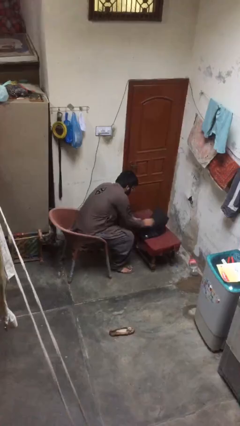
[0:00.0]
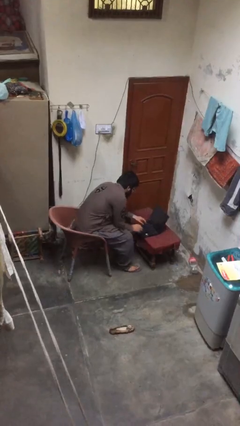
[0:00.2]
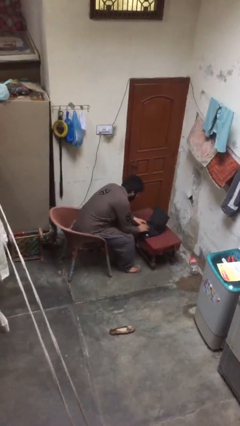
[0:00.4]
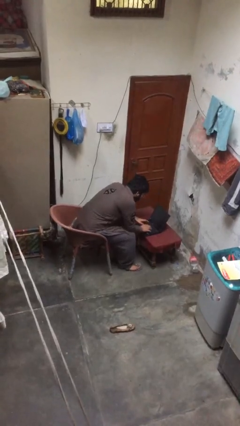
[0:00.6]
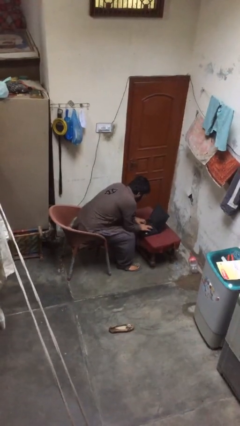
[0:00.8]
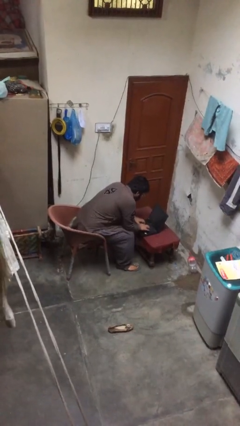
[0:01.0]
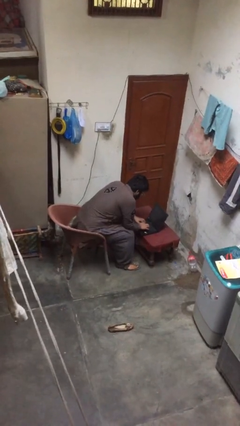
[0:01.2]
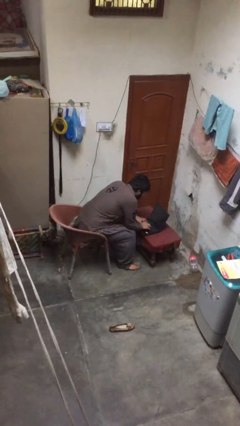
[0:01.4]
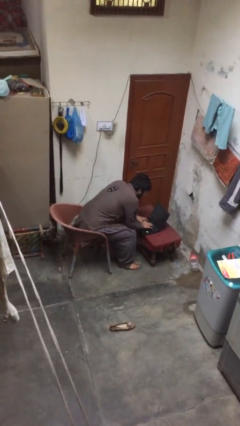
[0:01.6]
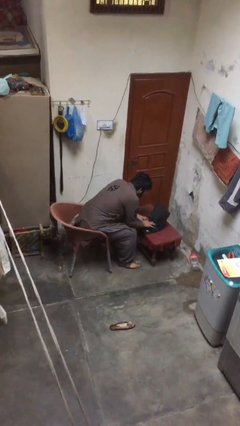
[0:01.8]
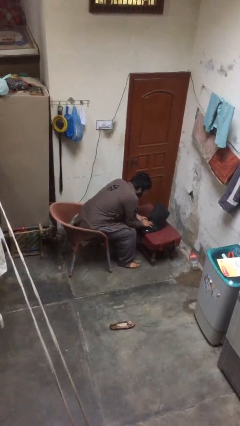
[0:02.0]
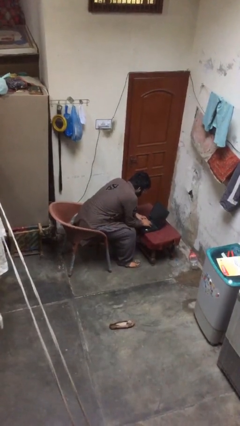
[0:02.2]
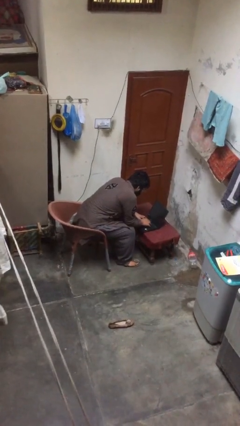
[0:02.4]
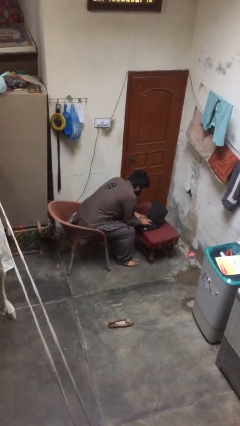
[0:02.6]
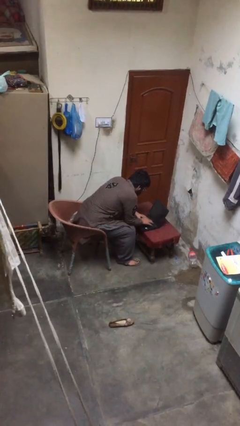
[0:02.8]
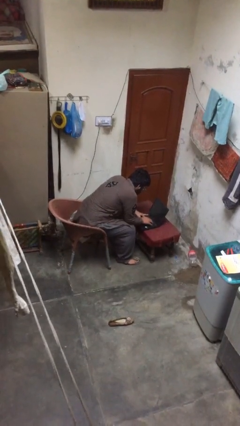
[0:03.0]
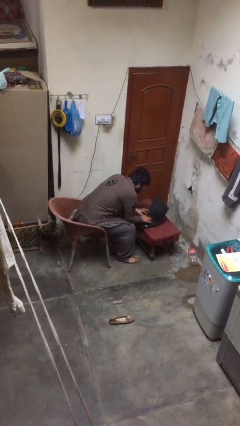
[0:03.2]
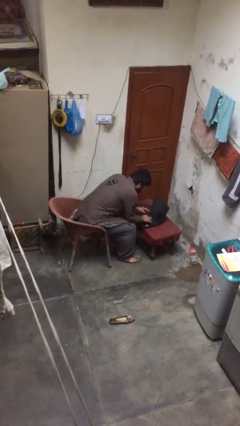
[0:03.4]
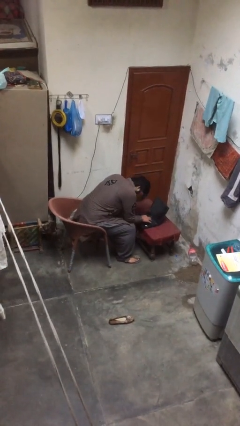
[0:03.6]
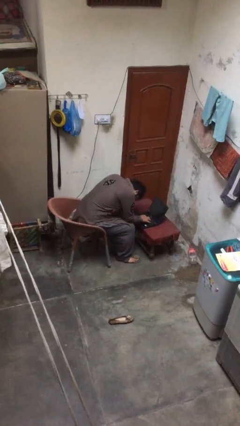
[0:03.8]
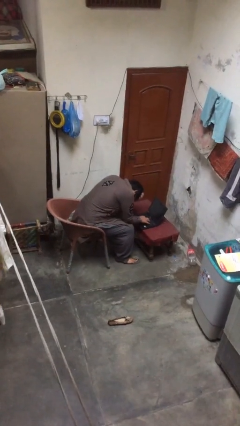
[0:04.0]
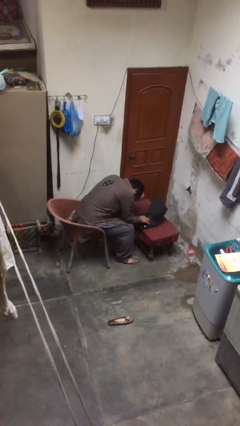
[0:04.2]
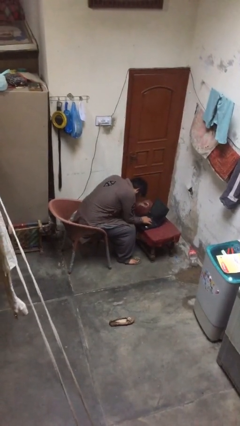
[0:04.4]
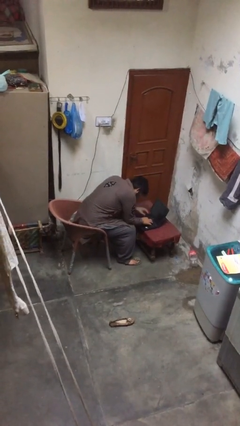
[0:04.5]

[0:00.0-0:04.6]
person interacts with laptop

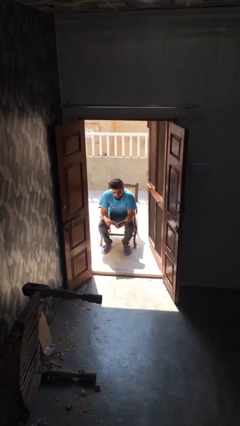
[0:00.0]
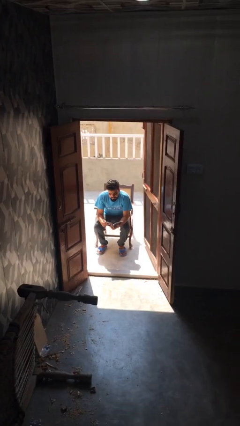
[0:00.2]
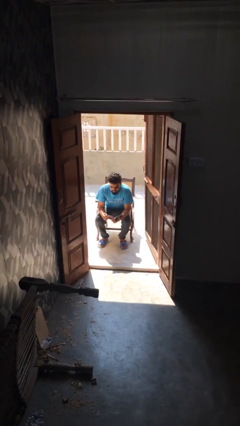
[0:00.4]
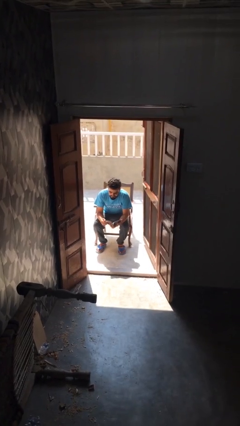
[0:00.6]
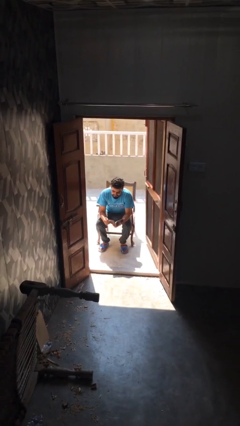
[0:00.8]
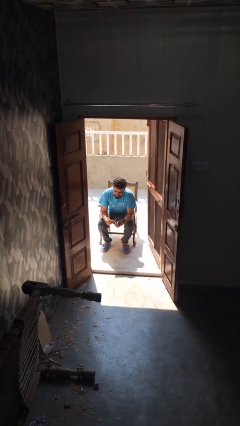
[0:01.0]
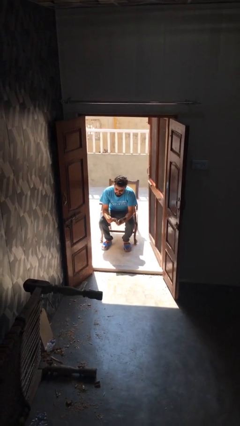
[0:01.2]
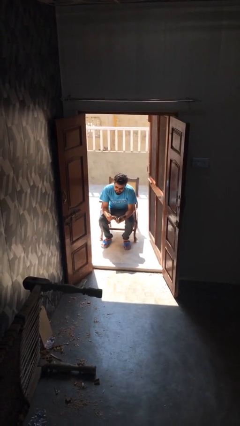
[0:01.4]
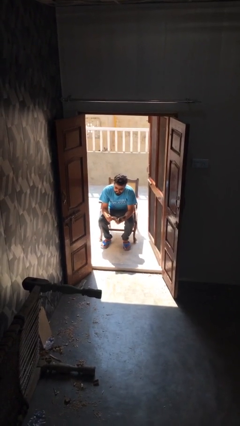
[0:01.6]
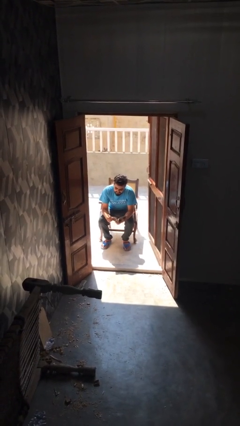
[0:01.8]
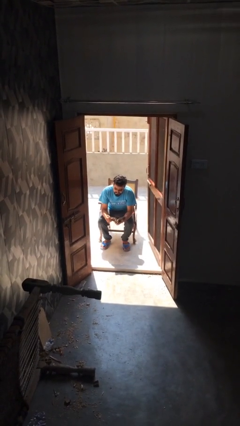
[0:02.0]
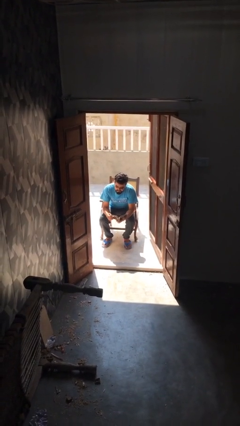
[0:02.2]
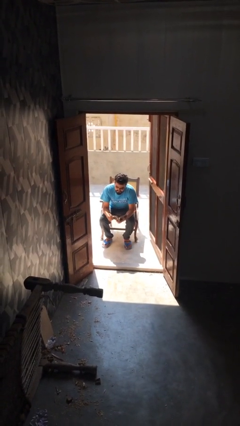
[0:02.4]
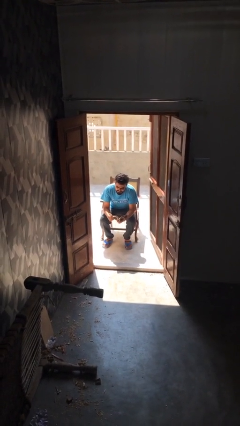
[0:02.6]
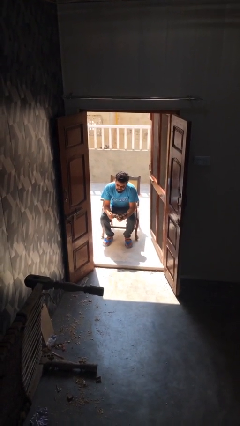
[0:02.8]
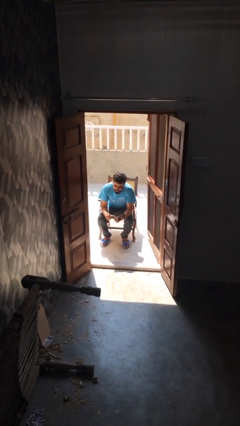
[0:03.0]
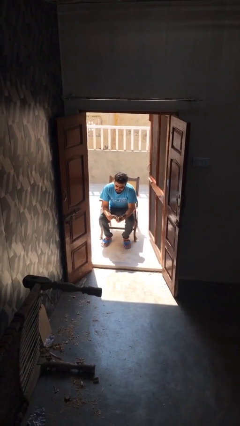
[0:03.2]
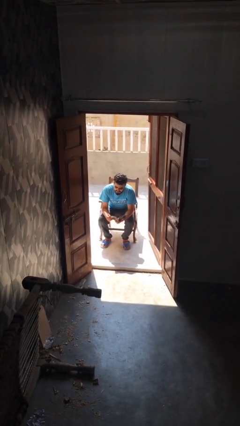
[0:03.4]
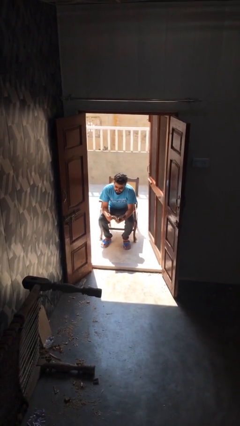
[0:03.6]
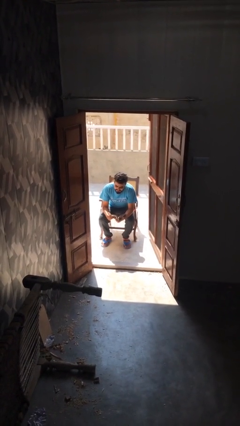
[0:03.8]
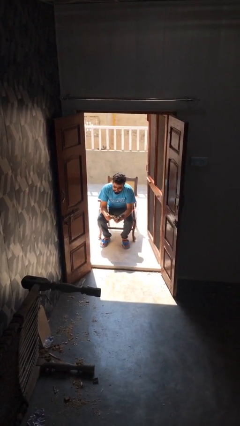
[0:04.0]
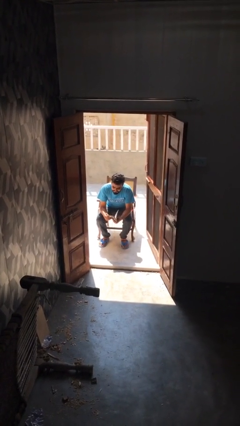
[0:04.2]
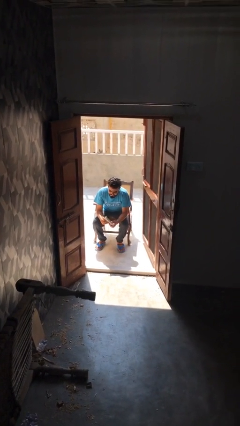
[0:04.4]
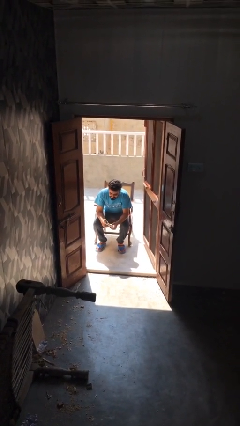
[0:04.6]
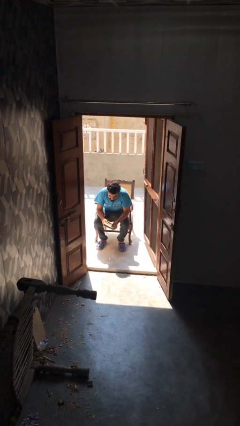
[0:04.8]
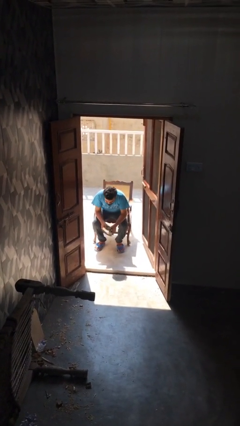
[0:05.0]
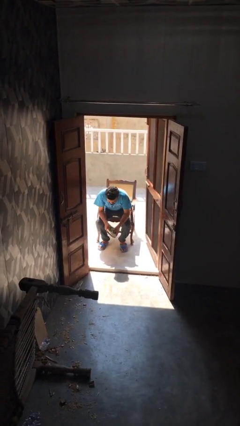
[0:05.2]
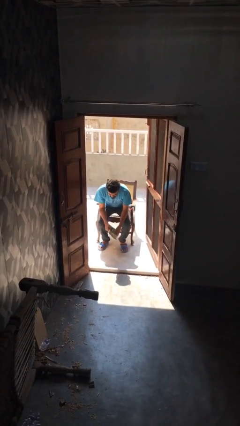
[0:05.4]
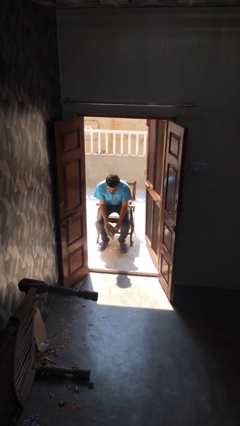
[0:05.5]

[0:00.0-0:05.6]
person reads document

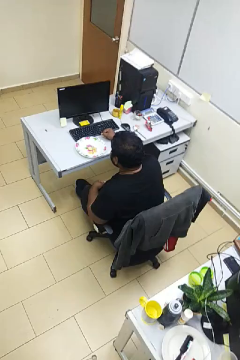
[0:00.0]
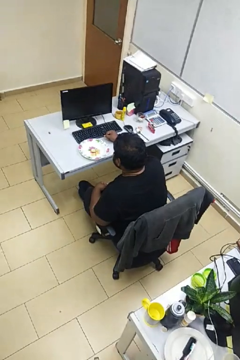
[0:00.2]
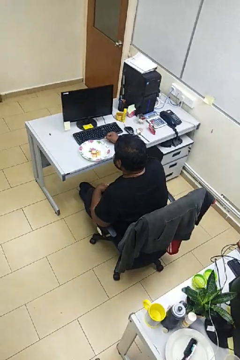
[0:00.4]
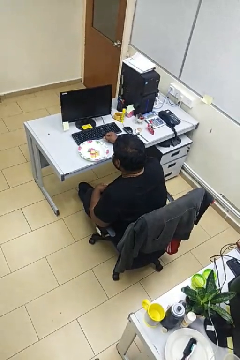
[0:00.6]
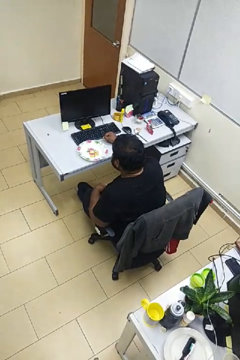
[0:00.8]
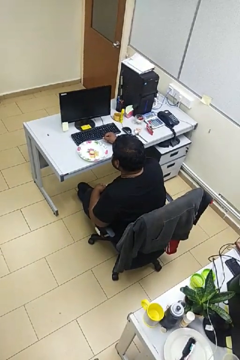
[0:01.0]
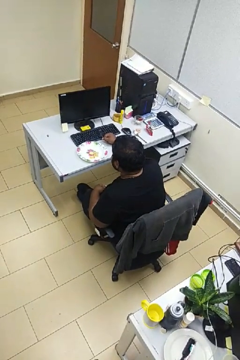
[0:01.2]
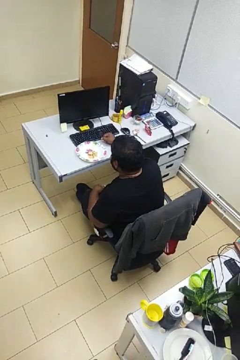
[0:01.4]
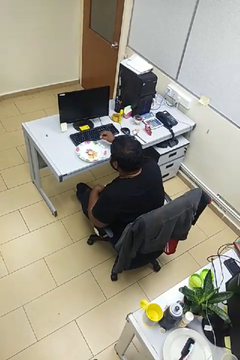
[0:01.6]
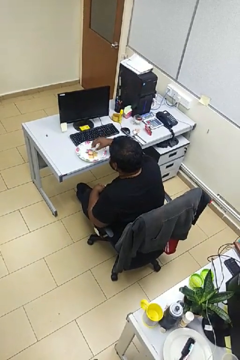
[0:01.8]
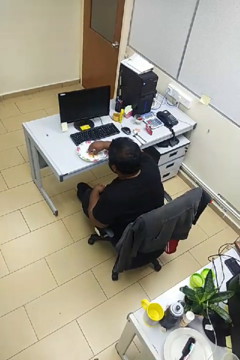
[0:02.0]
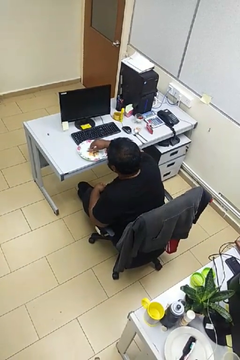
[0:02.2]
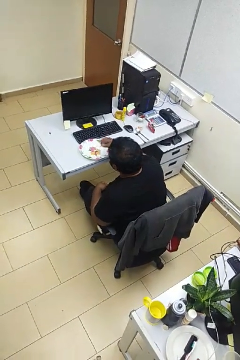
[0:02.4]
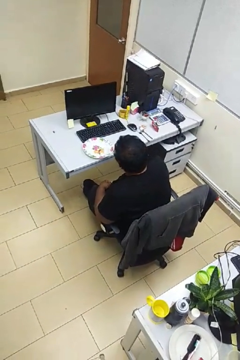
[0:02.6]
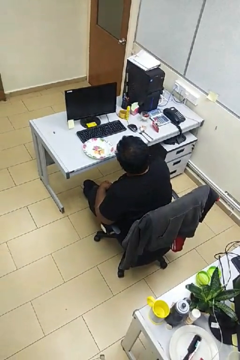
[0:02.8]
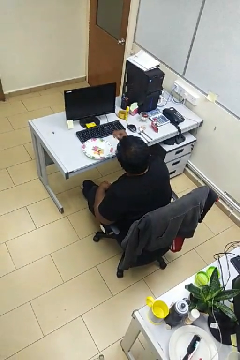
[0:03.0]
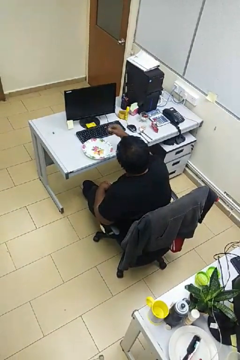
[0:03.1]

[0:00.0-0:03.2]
person eats with hands

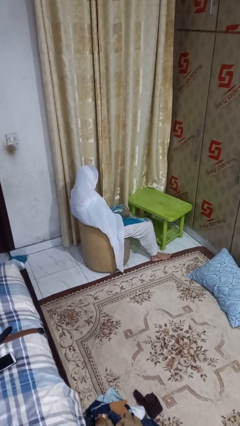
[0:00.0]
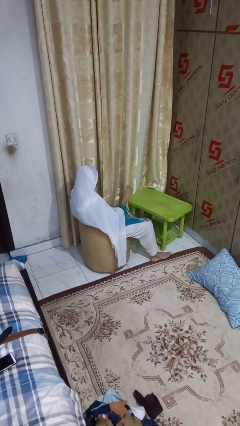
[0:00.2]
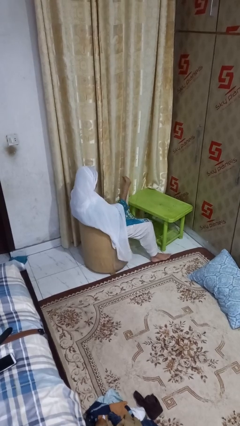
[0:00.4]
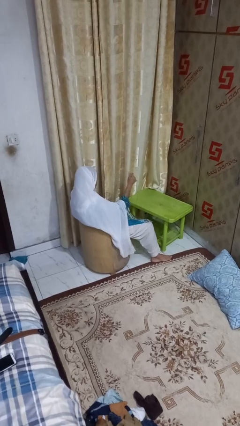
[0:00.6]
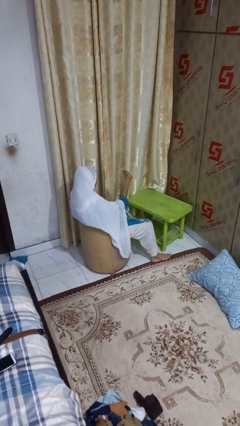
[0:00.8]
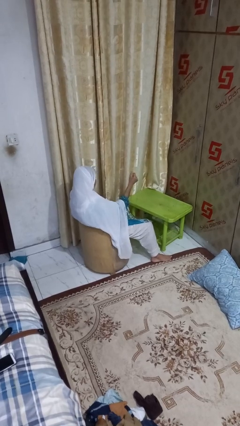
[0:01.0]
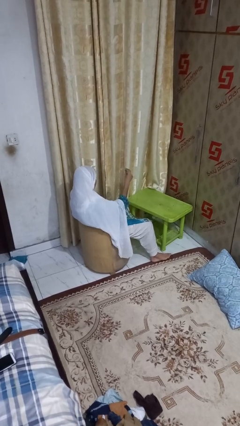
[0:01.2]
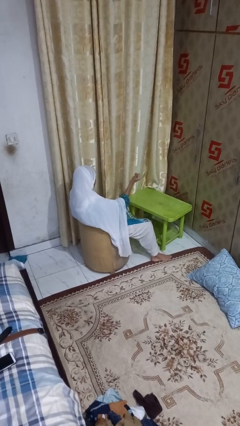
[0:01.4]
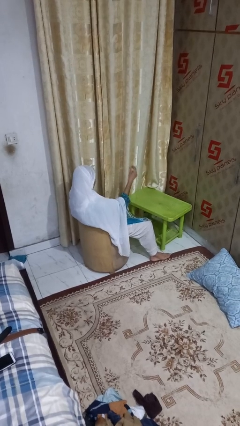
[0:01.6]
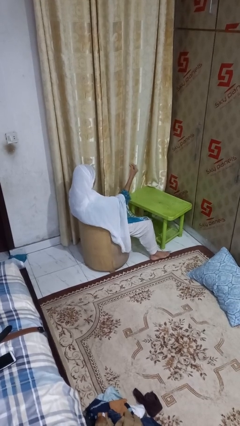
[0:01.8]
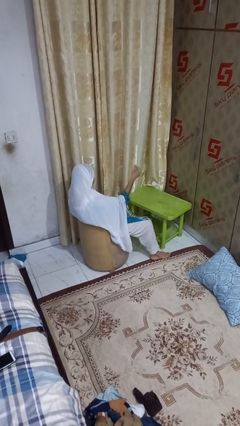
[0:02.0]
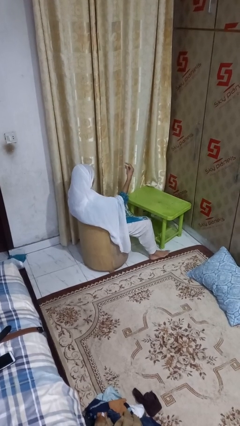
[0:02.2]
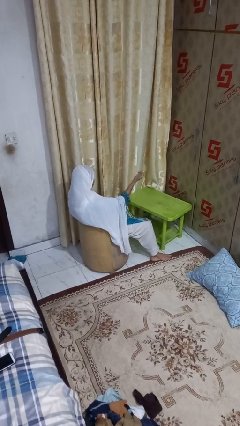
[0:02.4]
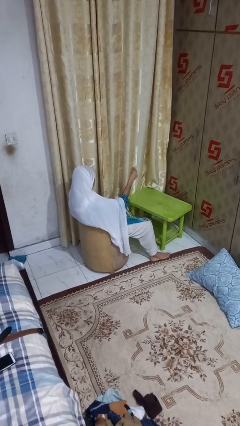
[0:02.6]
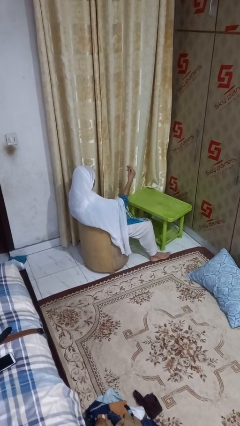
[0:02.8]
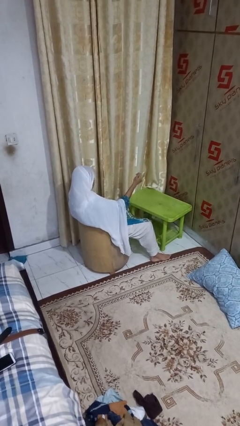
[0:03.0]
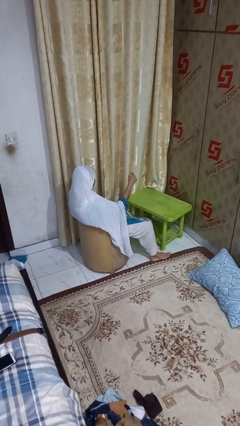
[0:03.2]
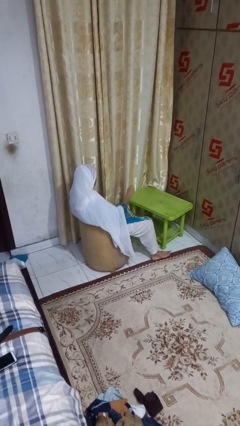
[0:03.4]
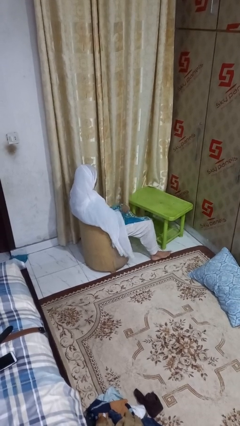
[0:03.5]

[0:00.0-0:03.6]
person snaps fingers

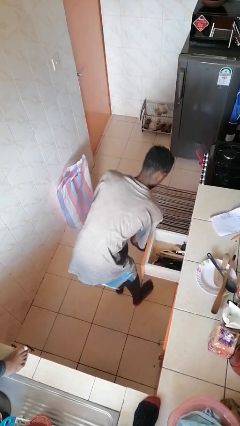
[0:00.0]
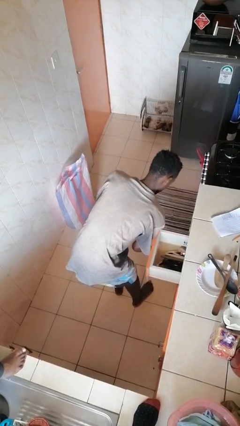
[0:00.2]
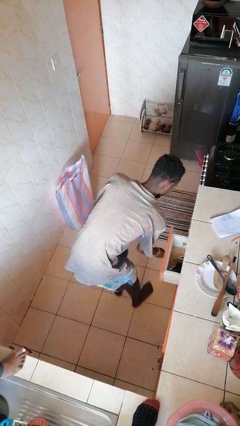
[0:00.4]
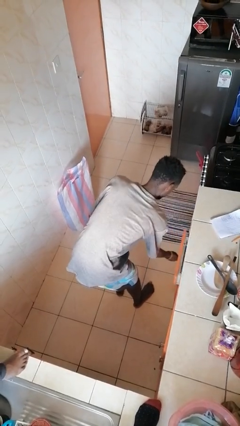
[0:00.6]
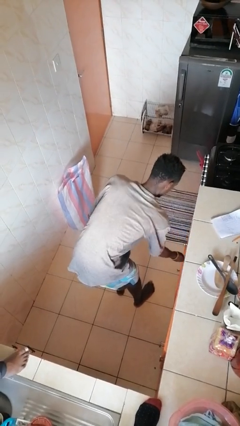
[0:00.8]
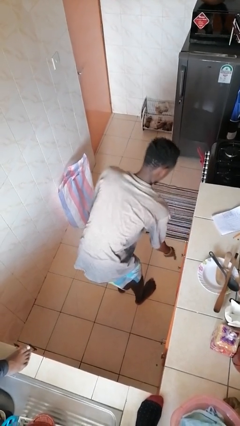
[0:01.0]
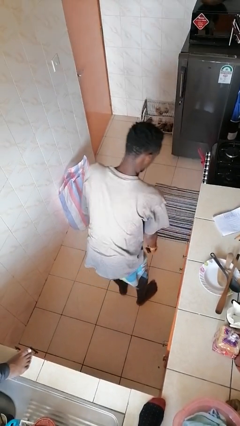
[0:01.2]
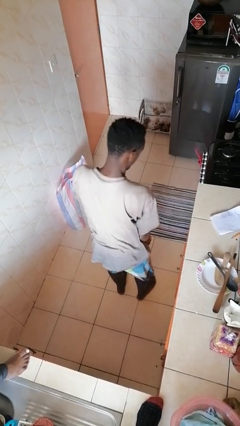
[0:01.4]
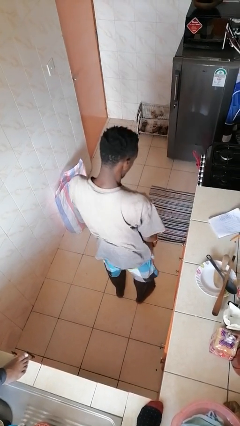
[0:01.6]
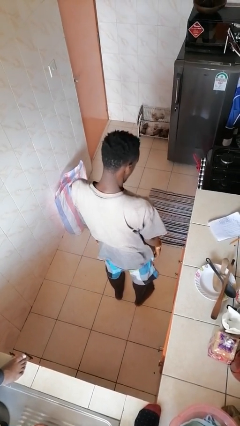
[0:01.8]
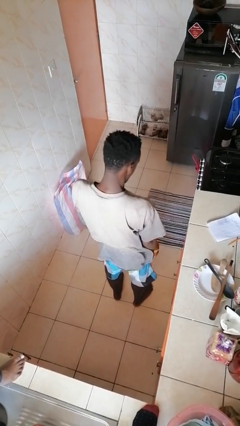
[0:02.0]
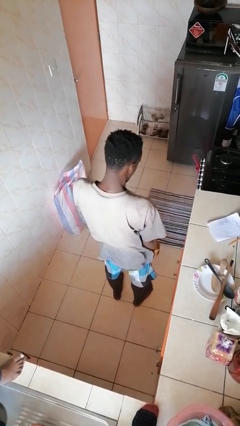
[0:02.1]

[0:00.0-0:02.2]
person closes kitchen drawer
